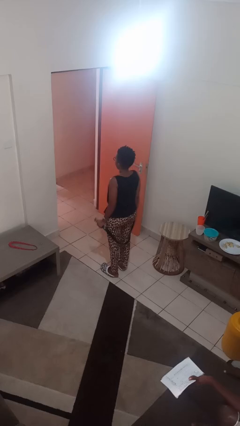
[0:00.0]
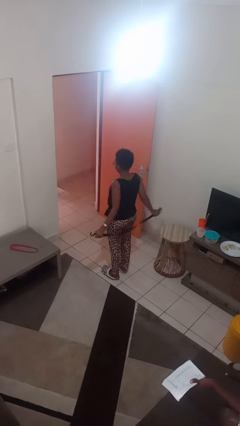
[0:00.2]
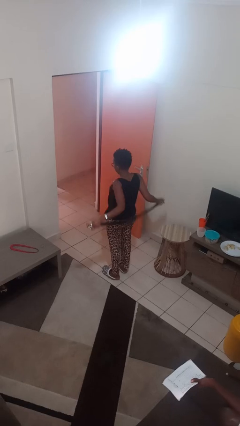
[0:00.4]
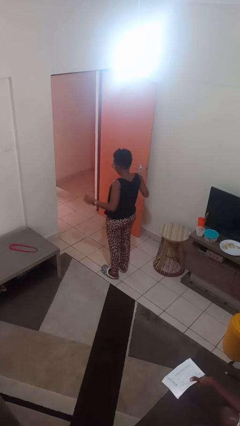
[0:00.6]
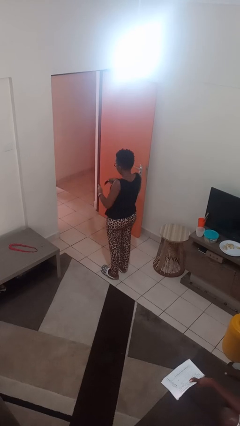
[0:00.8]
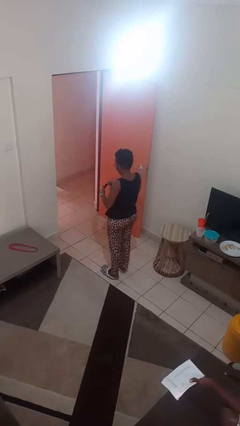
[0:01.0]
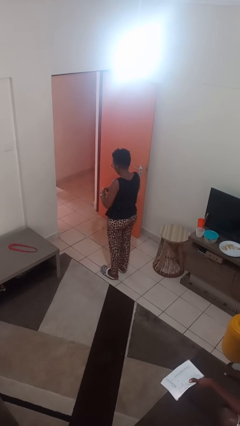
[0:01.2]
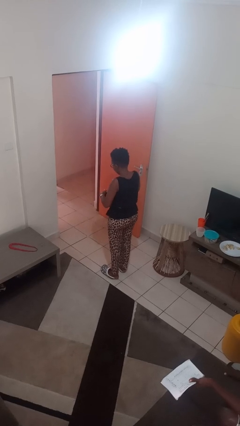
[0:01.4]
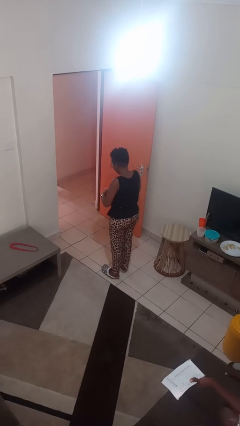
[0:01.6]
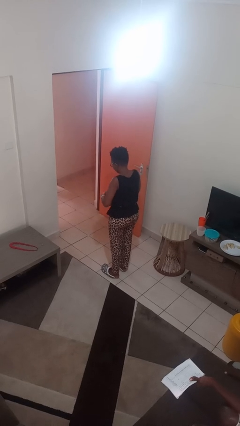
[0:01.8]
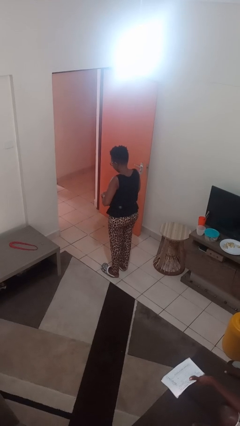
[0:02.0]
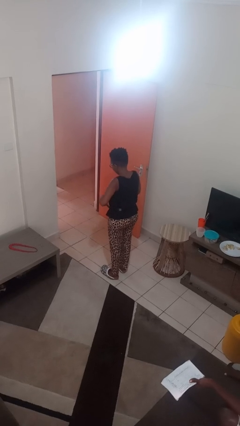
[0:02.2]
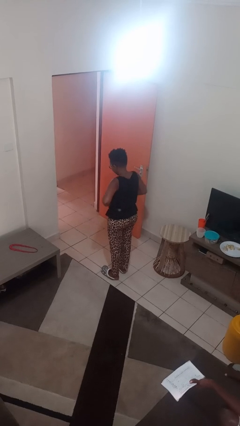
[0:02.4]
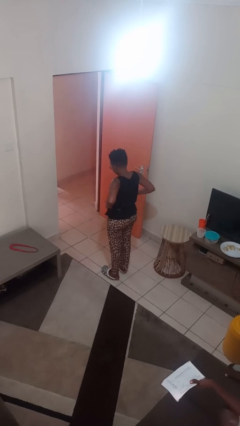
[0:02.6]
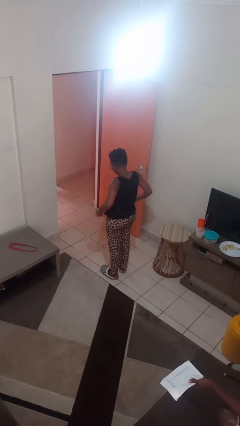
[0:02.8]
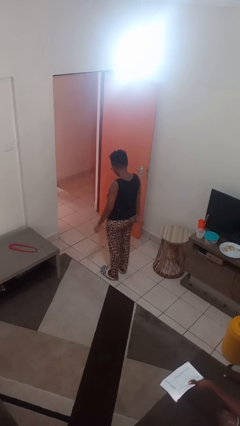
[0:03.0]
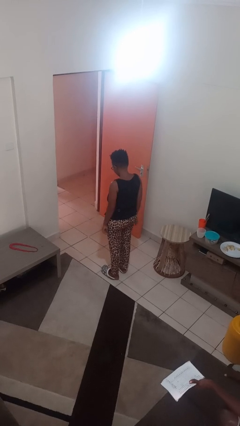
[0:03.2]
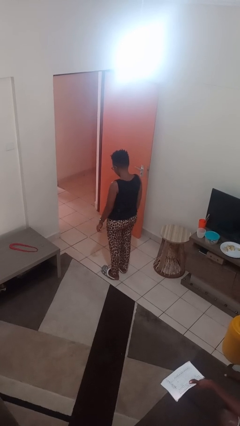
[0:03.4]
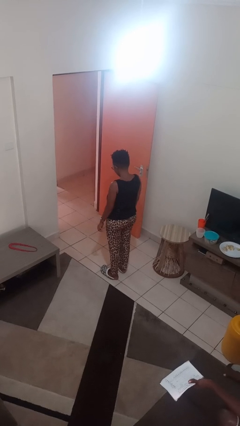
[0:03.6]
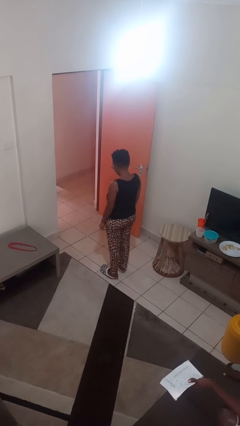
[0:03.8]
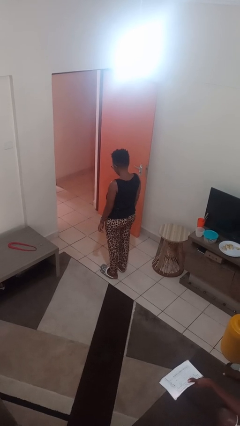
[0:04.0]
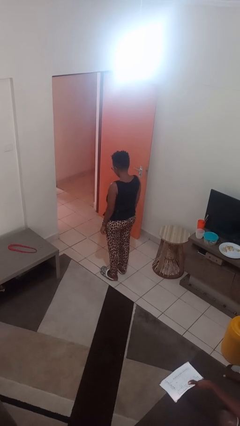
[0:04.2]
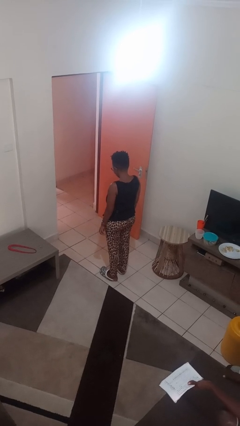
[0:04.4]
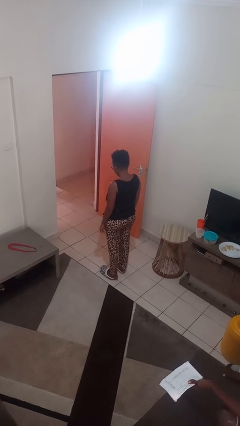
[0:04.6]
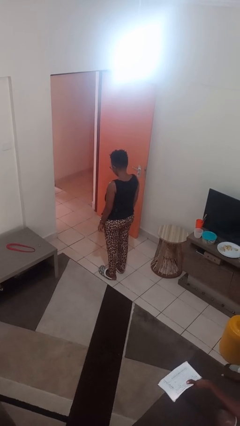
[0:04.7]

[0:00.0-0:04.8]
person puts on belt

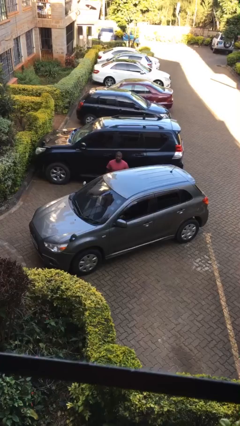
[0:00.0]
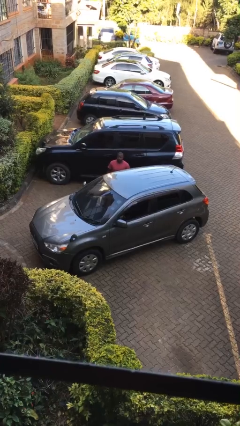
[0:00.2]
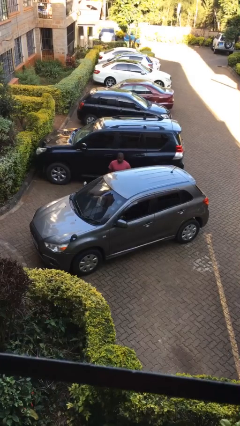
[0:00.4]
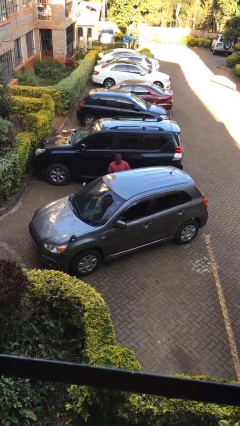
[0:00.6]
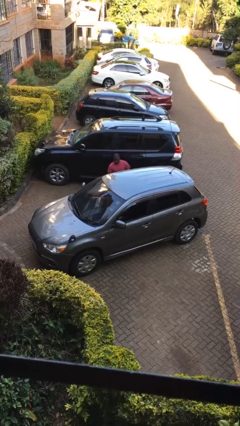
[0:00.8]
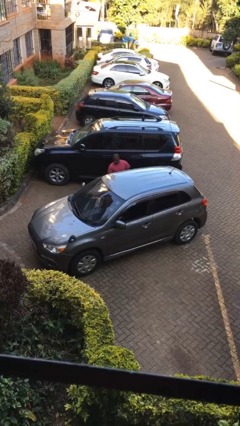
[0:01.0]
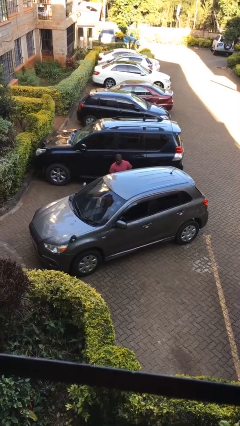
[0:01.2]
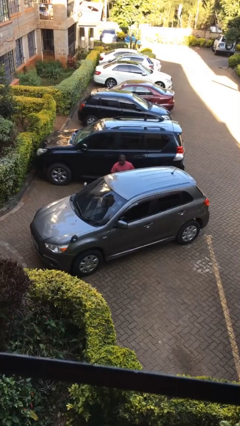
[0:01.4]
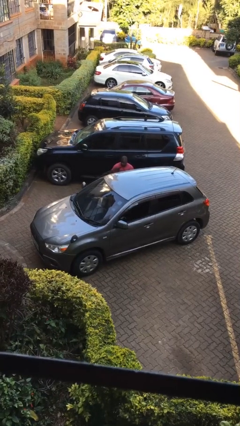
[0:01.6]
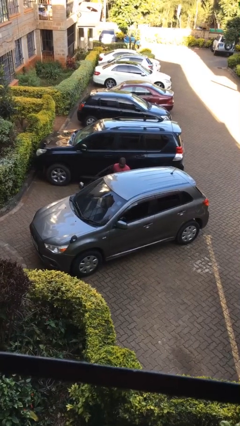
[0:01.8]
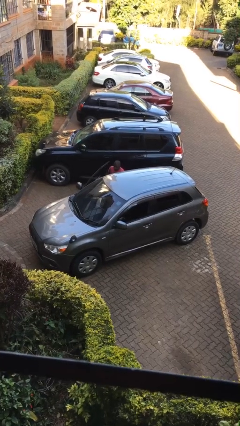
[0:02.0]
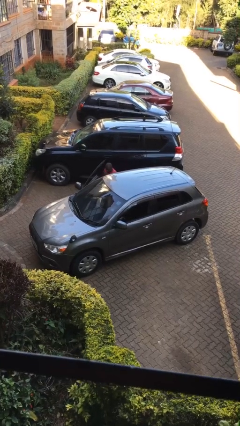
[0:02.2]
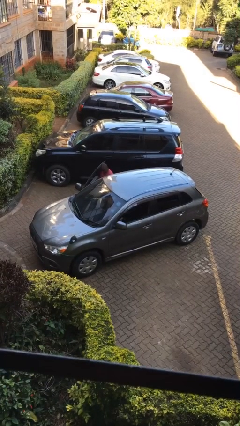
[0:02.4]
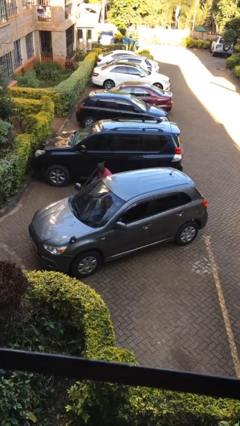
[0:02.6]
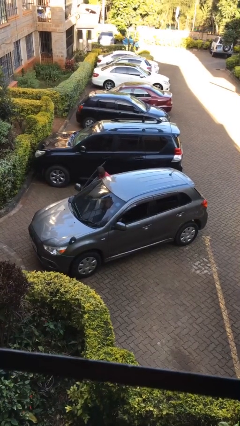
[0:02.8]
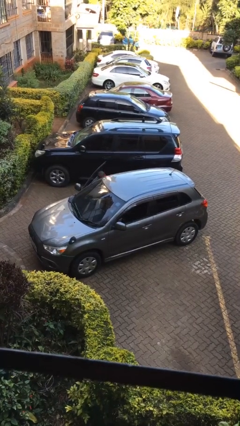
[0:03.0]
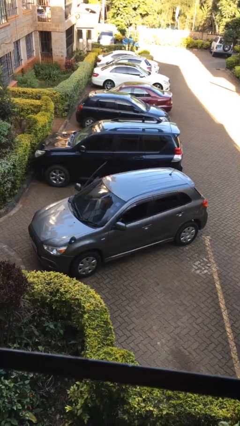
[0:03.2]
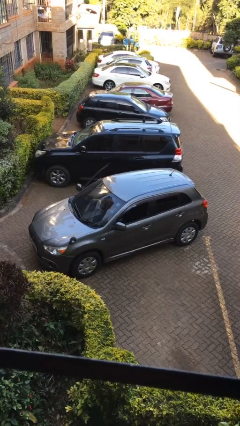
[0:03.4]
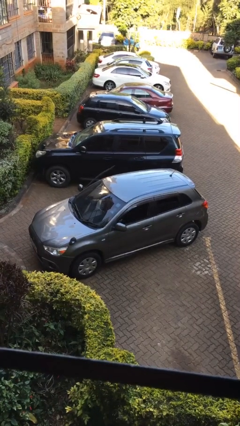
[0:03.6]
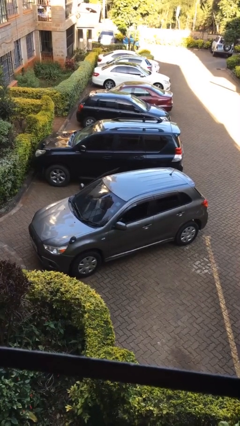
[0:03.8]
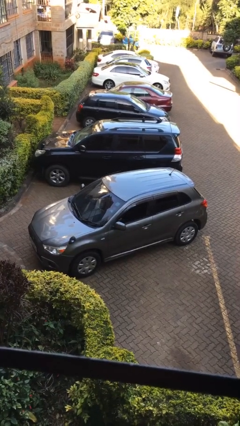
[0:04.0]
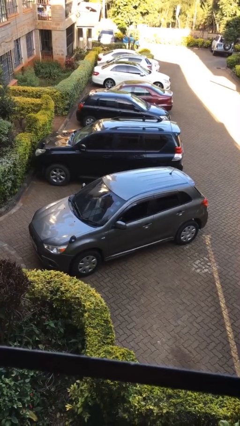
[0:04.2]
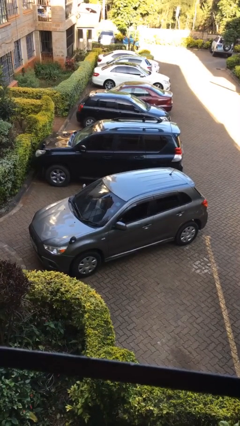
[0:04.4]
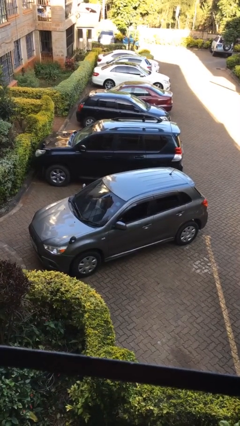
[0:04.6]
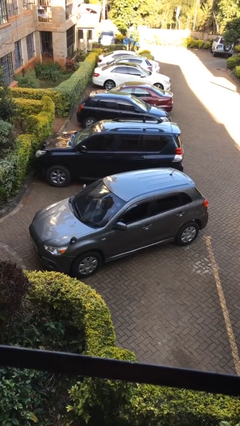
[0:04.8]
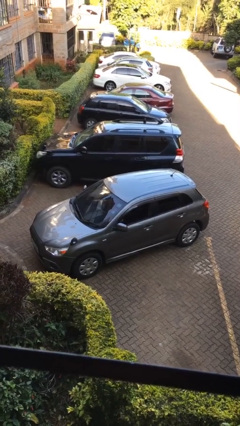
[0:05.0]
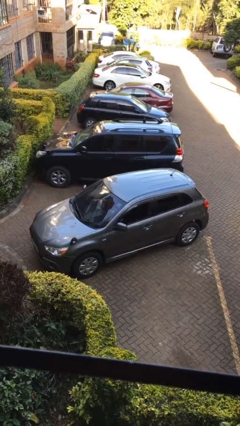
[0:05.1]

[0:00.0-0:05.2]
car picks up person

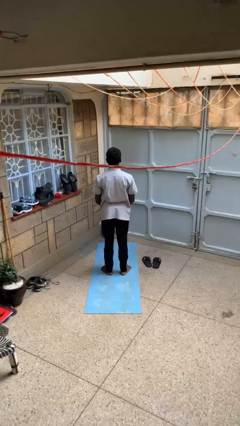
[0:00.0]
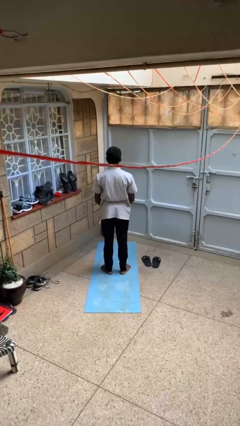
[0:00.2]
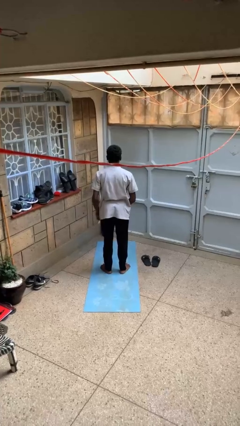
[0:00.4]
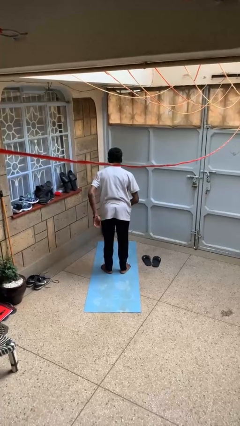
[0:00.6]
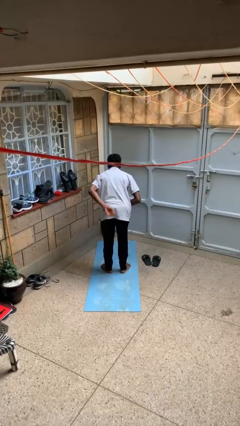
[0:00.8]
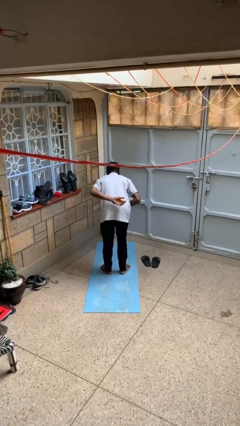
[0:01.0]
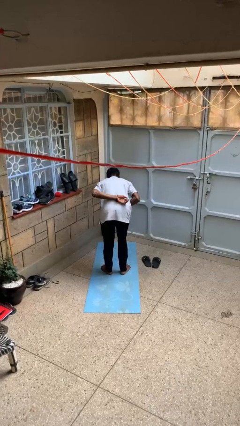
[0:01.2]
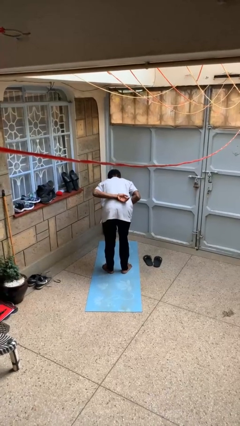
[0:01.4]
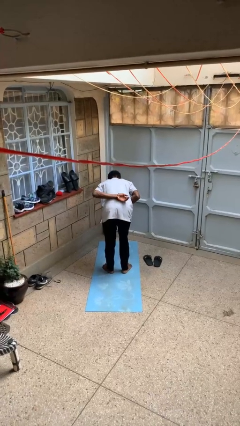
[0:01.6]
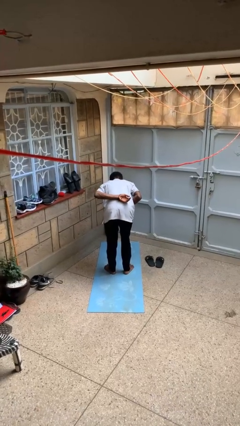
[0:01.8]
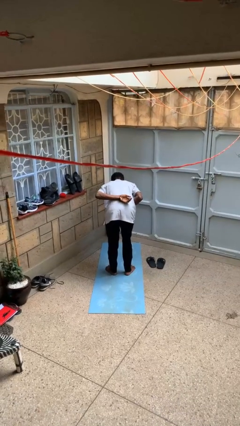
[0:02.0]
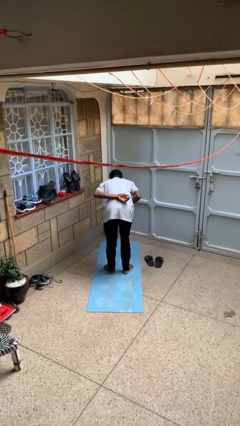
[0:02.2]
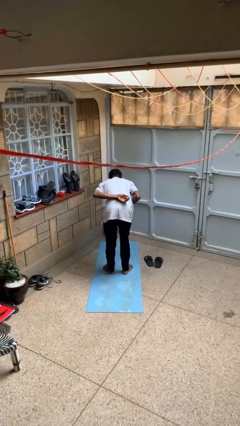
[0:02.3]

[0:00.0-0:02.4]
person bows

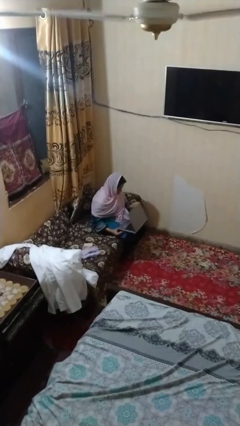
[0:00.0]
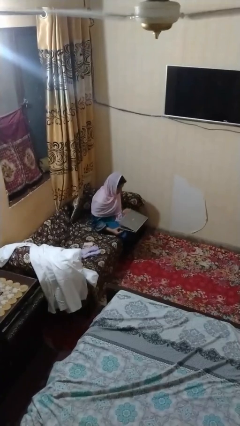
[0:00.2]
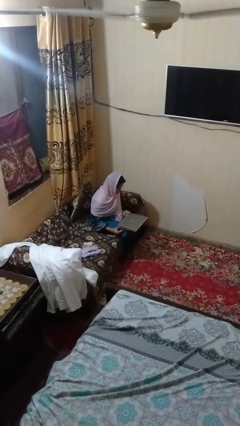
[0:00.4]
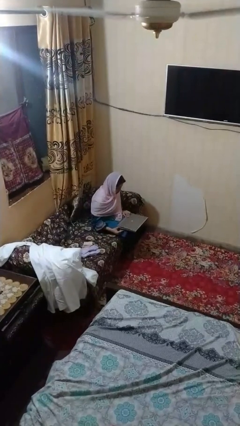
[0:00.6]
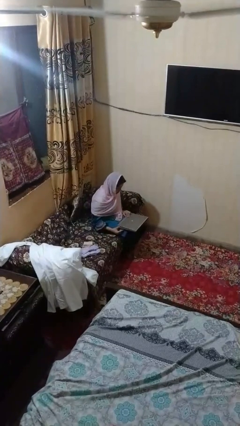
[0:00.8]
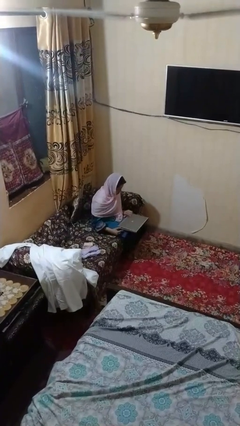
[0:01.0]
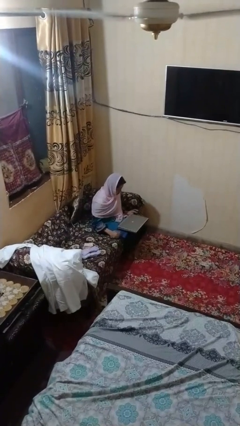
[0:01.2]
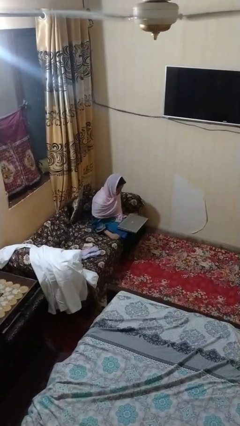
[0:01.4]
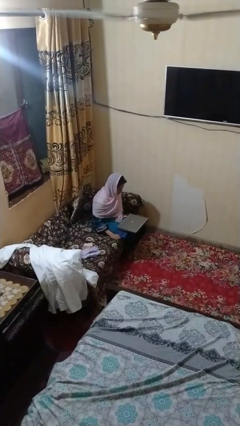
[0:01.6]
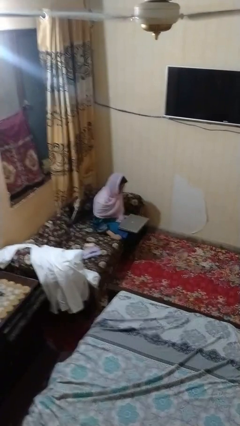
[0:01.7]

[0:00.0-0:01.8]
person closes laptop

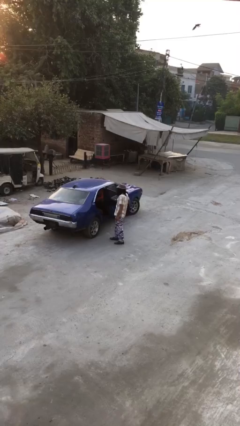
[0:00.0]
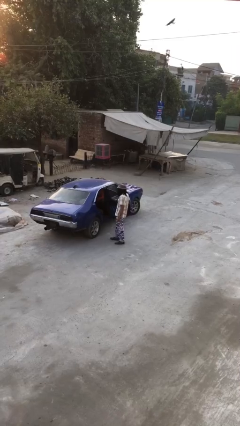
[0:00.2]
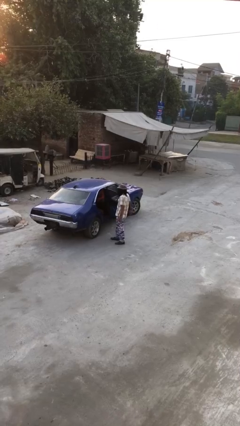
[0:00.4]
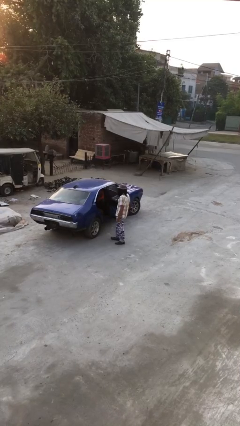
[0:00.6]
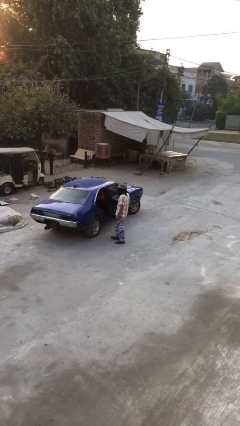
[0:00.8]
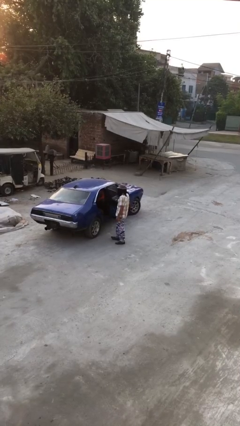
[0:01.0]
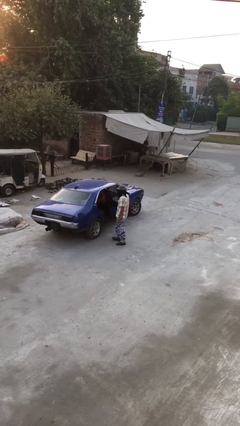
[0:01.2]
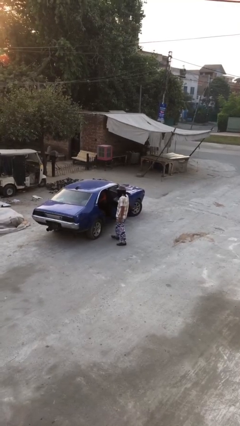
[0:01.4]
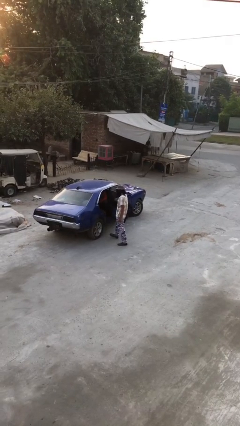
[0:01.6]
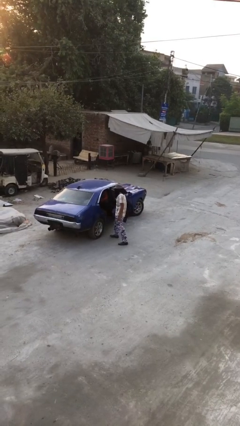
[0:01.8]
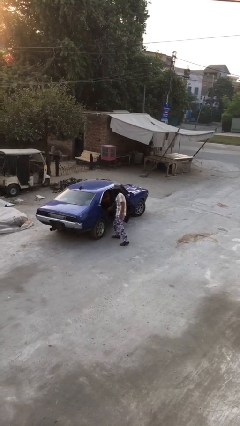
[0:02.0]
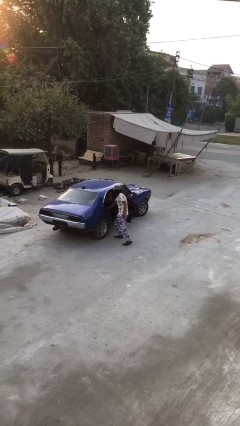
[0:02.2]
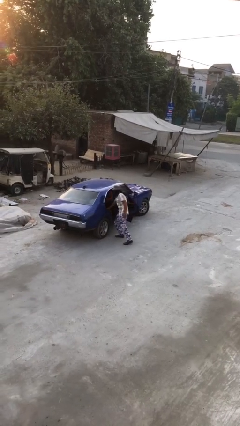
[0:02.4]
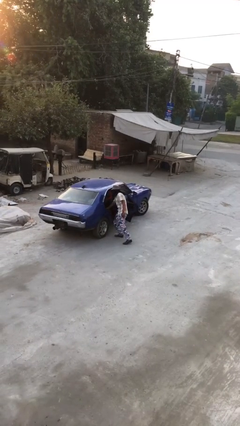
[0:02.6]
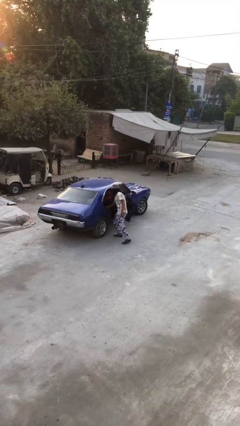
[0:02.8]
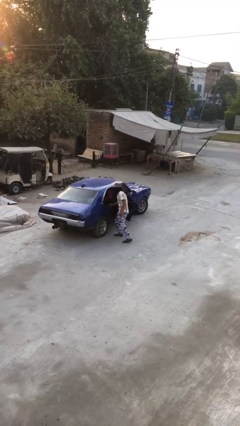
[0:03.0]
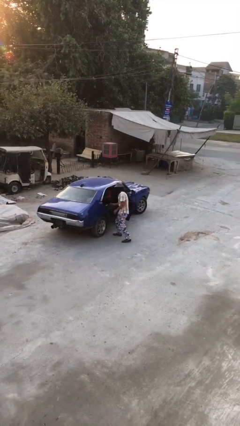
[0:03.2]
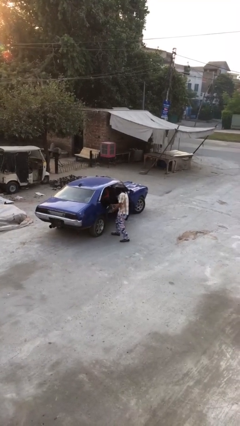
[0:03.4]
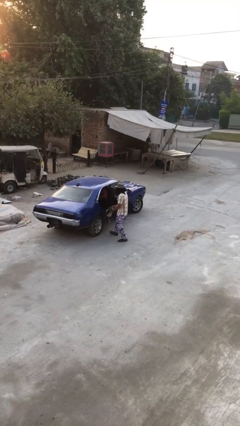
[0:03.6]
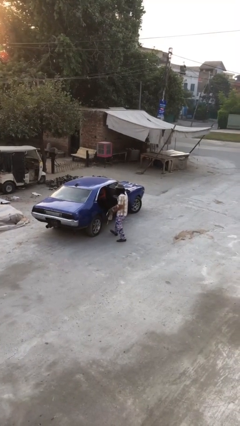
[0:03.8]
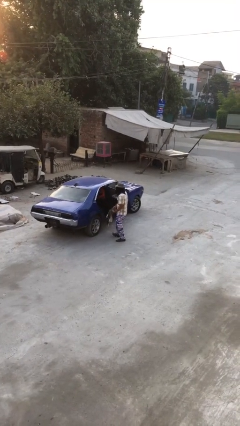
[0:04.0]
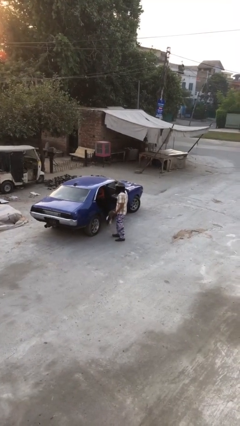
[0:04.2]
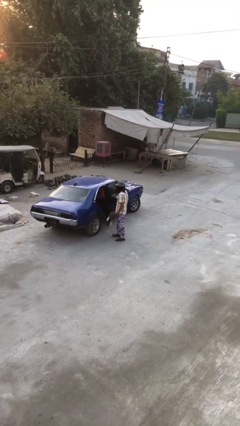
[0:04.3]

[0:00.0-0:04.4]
person unloads car
